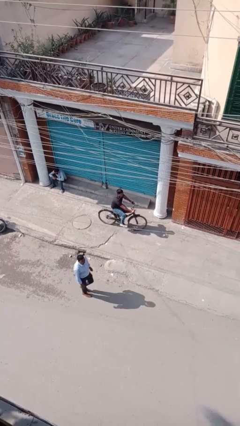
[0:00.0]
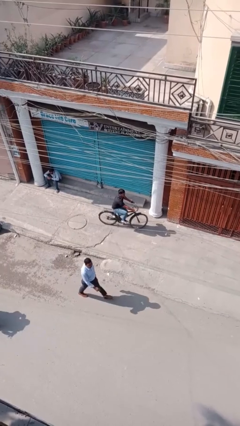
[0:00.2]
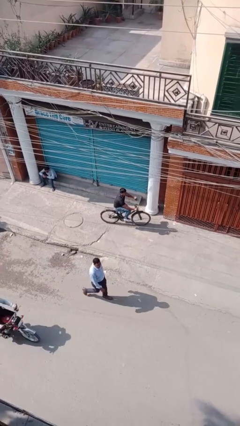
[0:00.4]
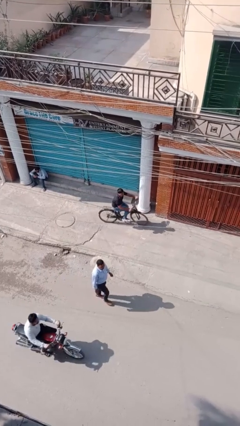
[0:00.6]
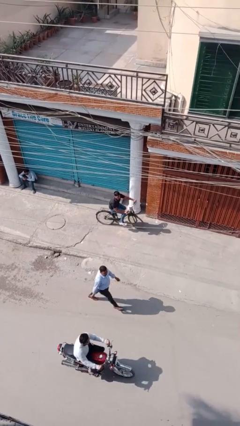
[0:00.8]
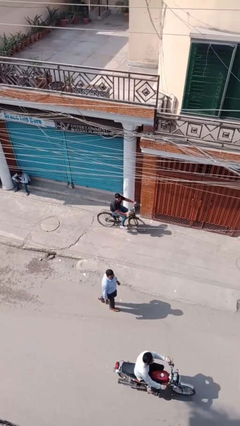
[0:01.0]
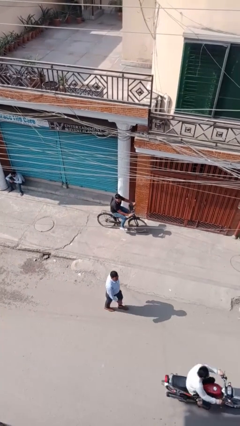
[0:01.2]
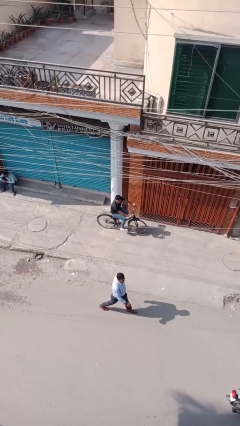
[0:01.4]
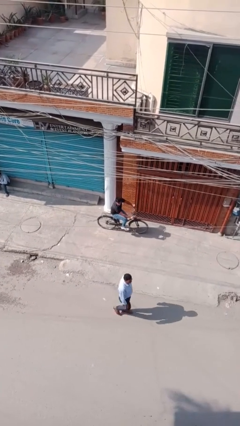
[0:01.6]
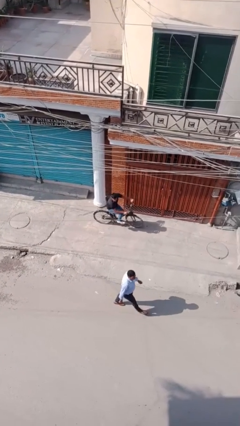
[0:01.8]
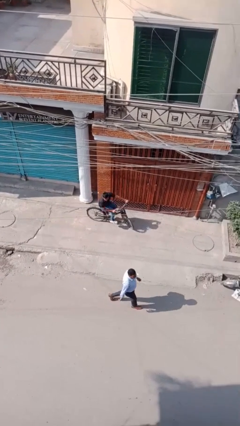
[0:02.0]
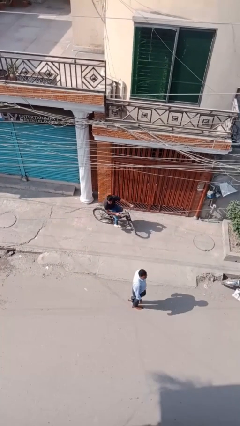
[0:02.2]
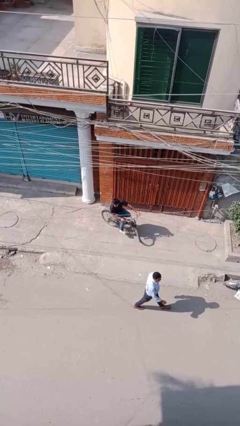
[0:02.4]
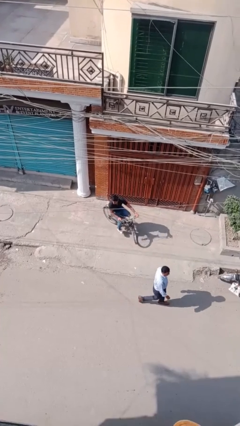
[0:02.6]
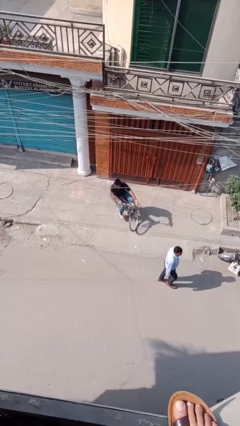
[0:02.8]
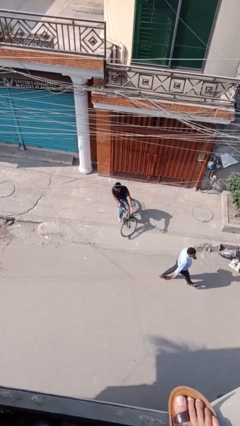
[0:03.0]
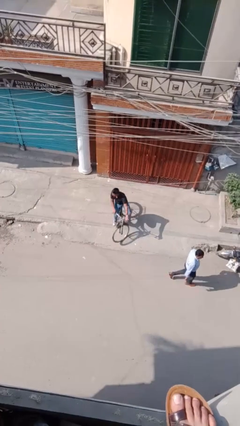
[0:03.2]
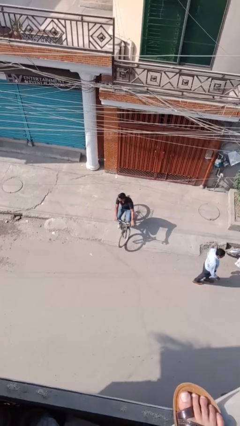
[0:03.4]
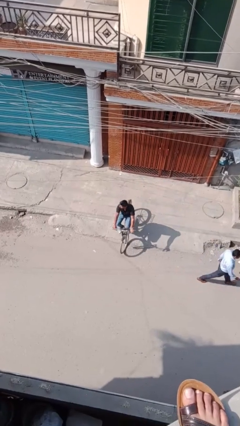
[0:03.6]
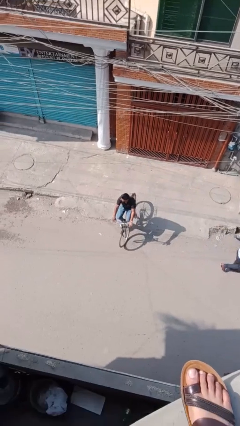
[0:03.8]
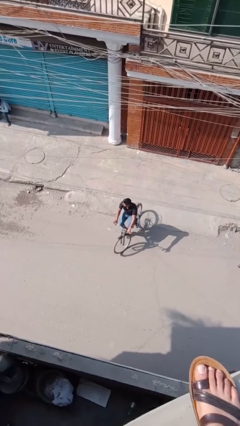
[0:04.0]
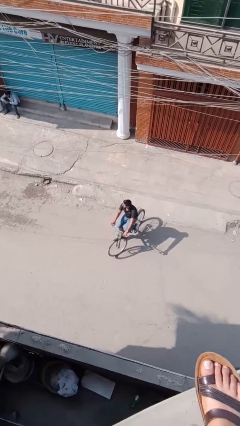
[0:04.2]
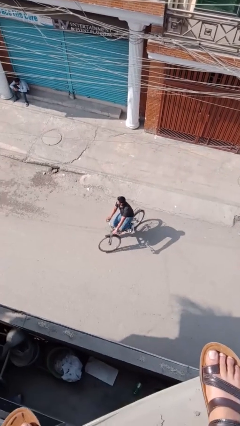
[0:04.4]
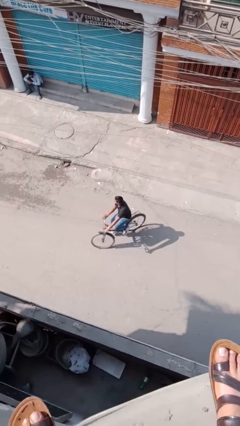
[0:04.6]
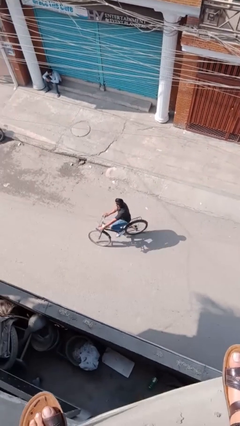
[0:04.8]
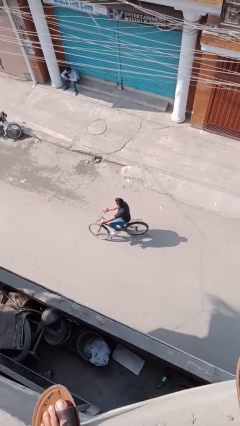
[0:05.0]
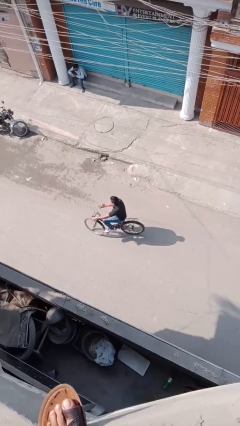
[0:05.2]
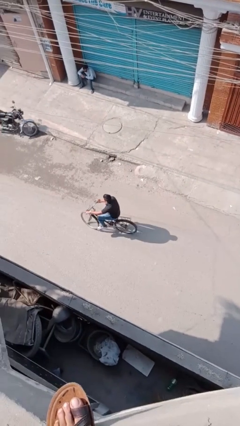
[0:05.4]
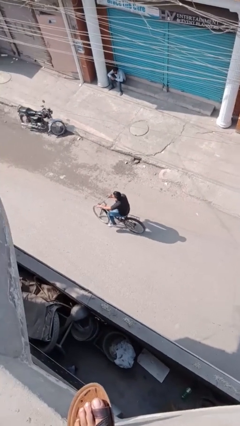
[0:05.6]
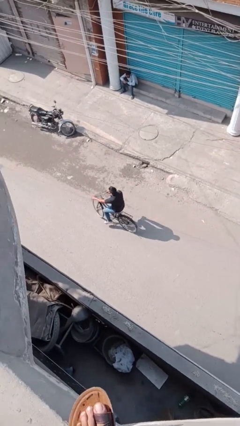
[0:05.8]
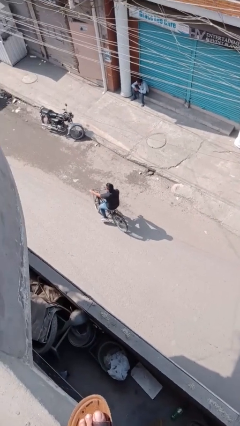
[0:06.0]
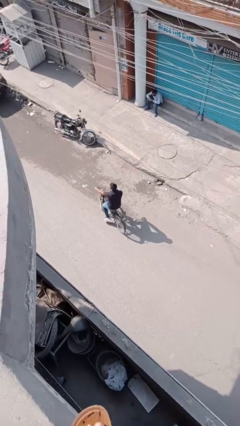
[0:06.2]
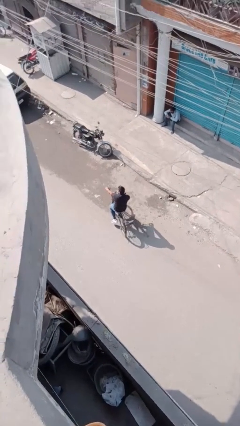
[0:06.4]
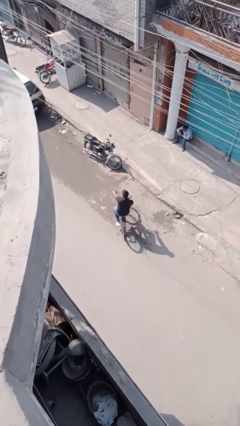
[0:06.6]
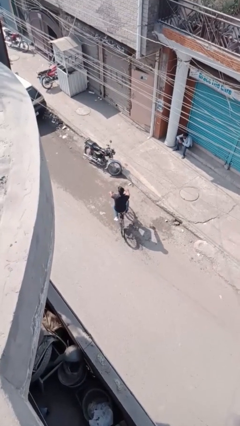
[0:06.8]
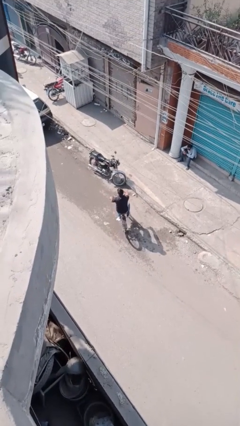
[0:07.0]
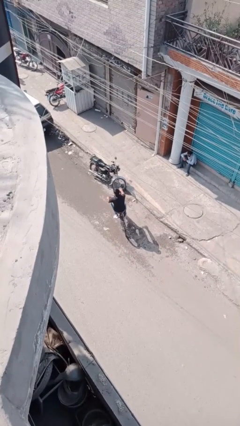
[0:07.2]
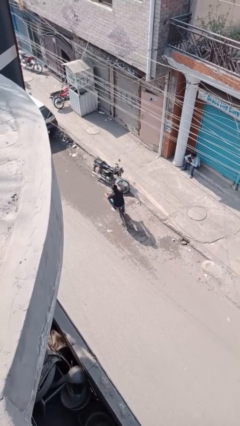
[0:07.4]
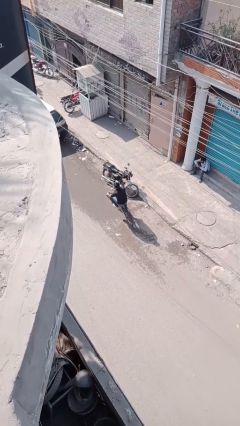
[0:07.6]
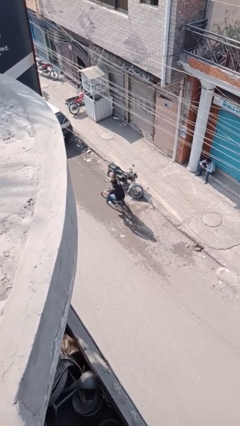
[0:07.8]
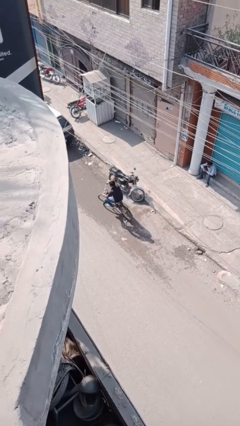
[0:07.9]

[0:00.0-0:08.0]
person rides bicycle

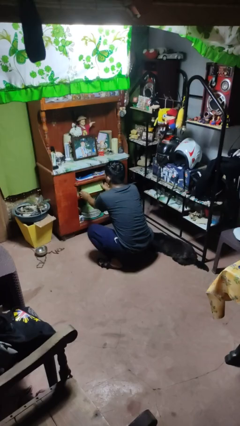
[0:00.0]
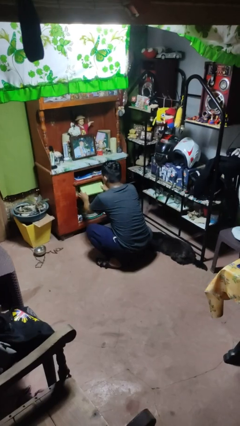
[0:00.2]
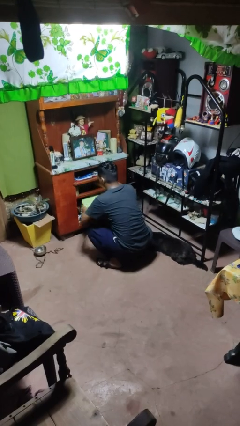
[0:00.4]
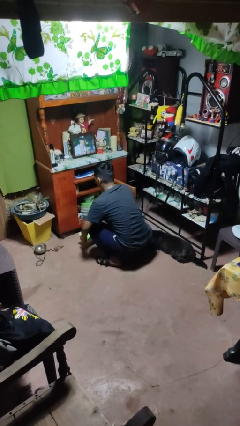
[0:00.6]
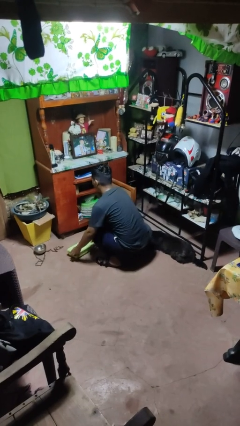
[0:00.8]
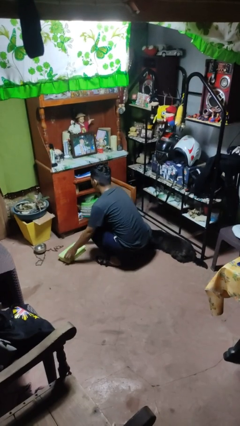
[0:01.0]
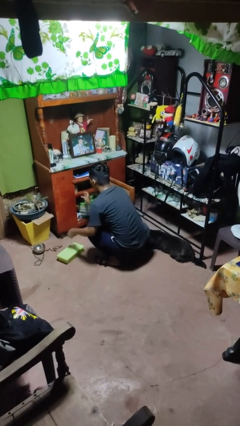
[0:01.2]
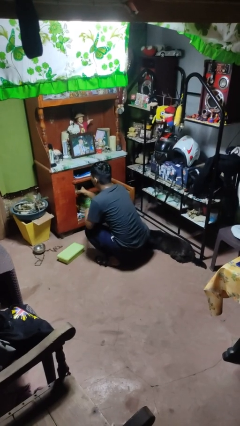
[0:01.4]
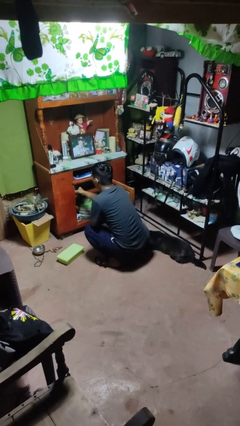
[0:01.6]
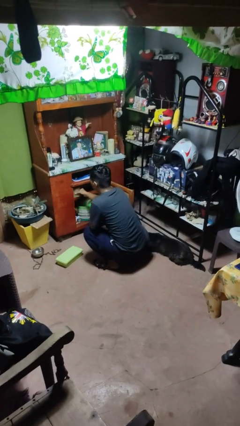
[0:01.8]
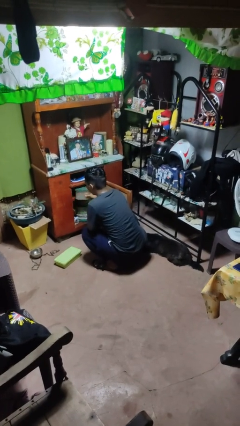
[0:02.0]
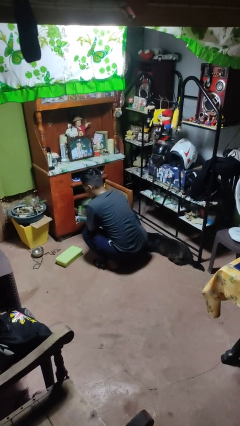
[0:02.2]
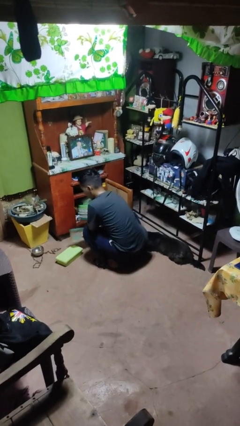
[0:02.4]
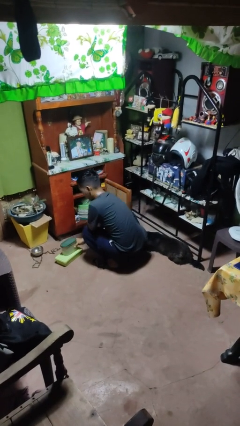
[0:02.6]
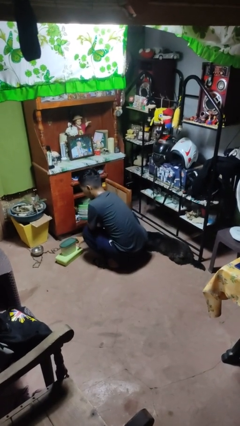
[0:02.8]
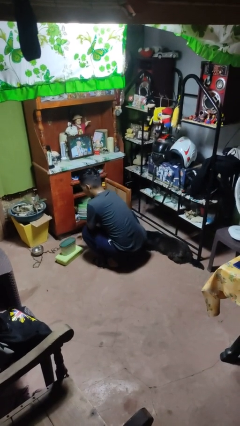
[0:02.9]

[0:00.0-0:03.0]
person takes object from cabinet

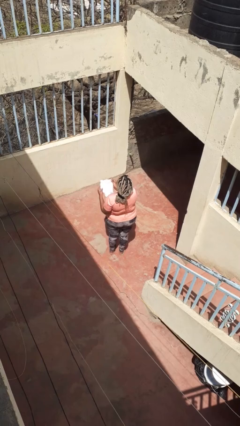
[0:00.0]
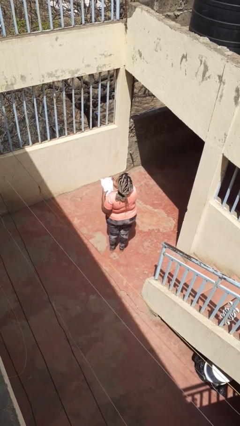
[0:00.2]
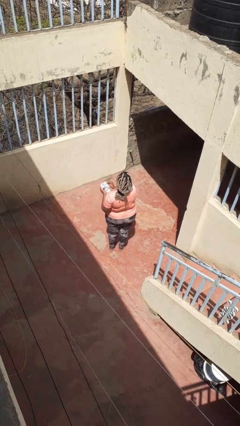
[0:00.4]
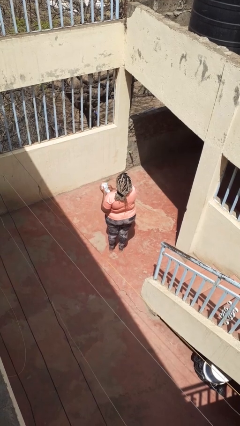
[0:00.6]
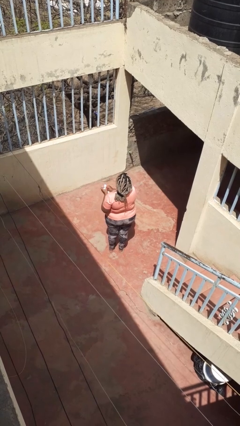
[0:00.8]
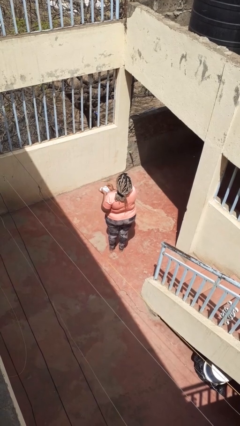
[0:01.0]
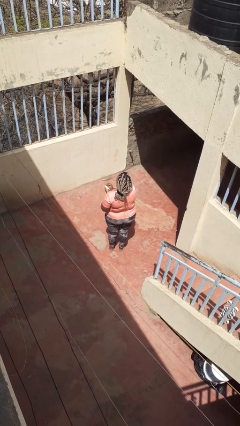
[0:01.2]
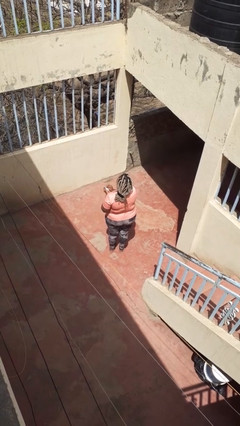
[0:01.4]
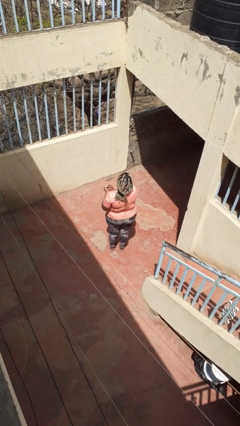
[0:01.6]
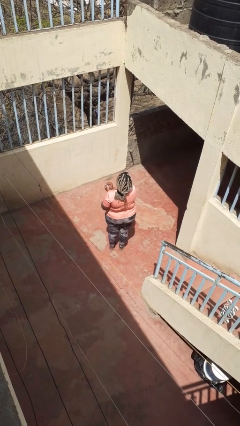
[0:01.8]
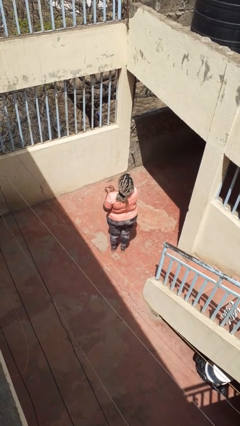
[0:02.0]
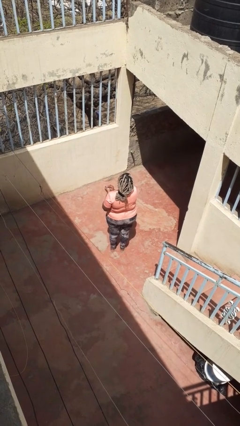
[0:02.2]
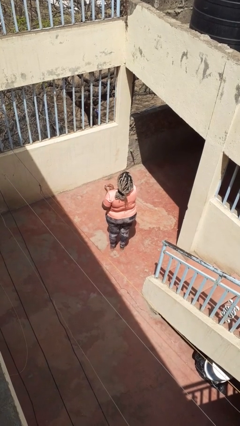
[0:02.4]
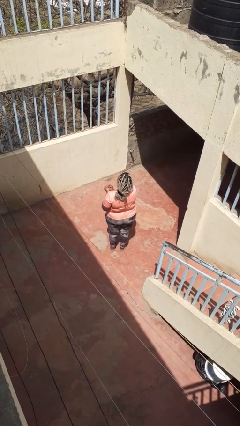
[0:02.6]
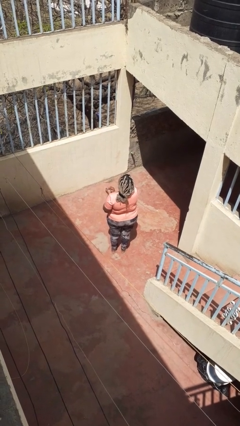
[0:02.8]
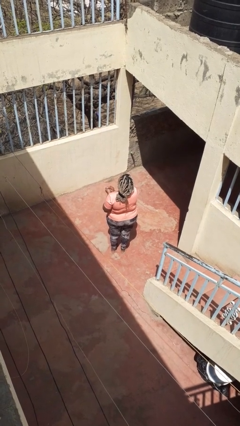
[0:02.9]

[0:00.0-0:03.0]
person crumples paper

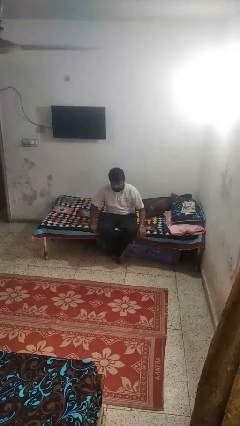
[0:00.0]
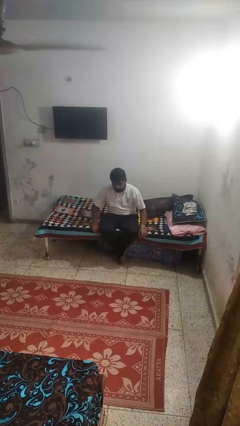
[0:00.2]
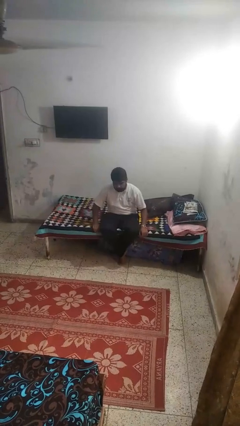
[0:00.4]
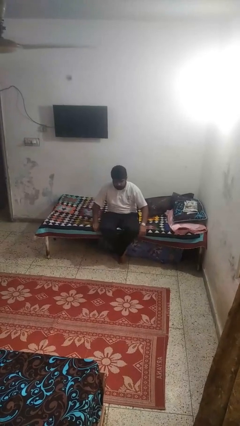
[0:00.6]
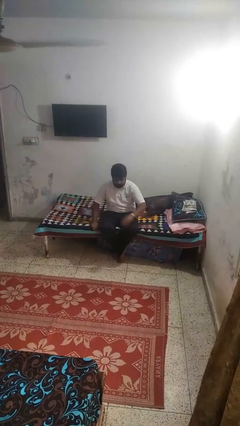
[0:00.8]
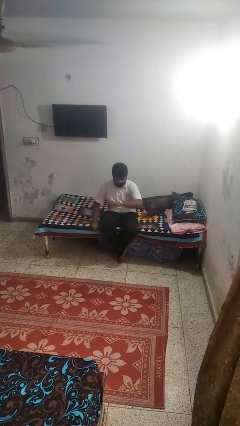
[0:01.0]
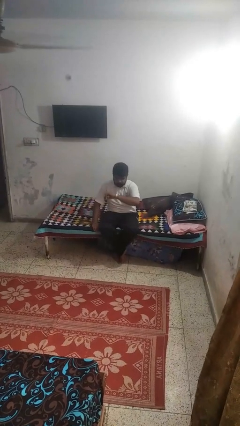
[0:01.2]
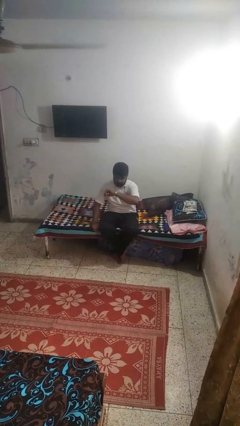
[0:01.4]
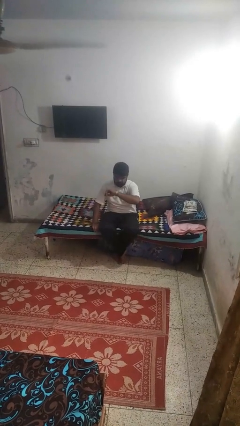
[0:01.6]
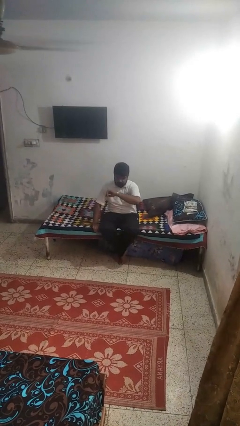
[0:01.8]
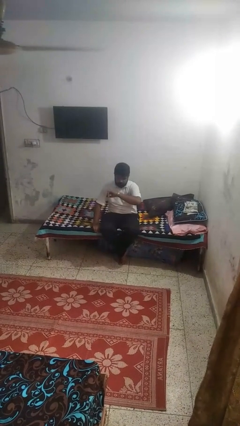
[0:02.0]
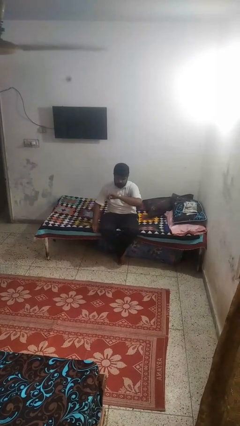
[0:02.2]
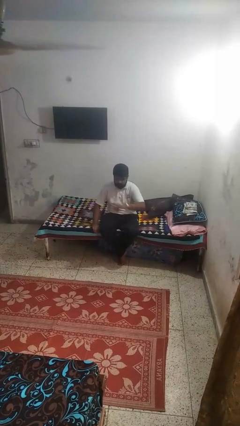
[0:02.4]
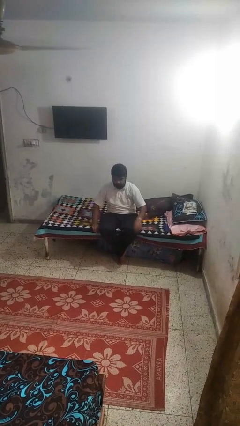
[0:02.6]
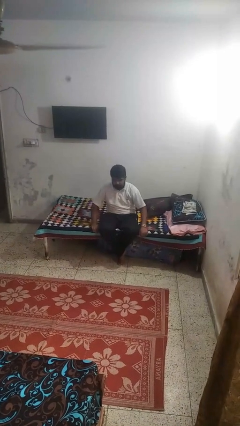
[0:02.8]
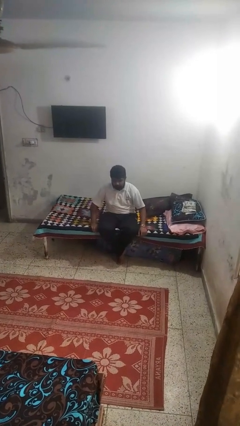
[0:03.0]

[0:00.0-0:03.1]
person looks at wristwatch

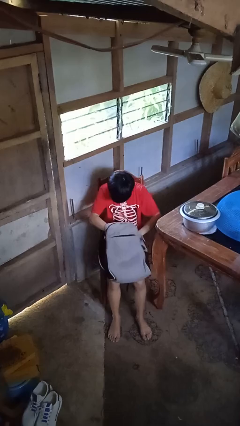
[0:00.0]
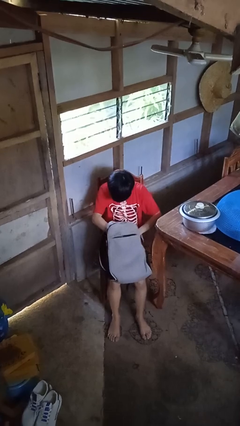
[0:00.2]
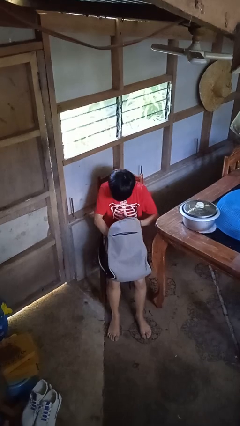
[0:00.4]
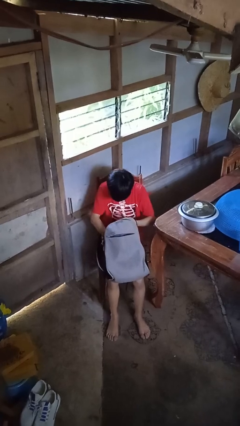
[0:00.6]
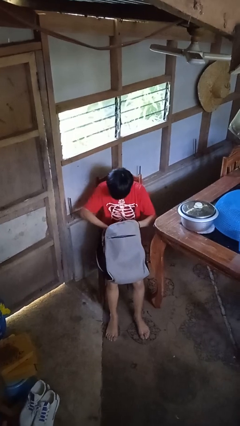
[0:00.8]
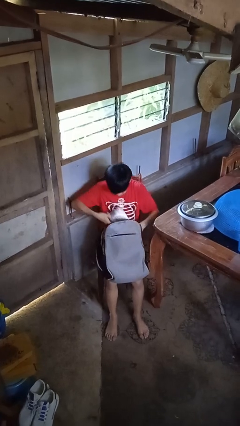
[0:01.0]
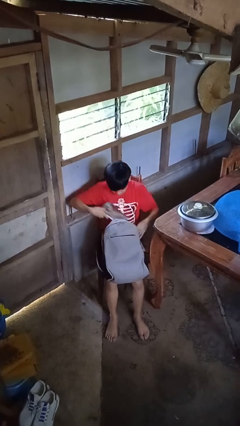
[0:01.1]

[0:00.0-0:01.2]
person takes object from backpack
